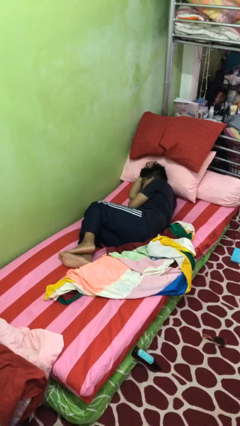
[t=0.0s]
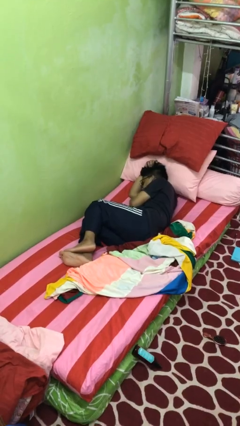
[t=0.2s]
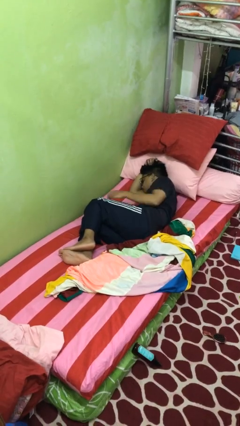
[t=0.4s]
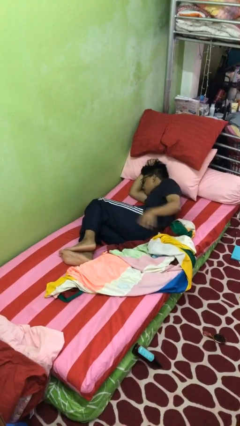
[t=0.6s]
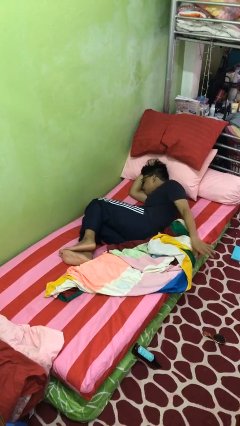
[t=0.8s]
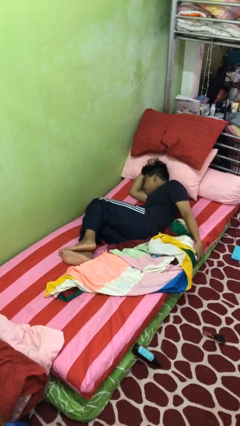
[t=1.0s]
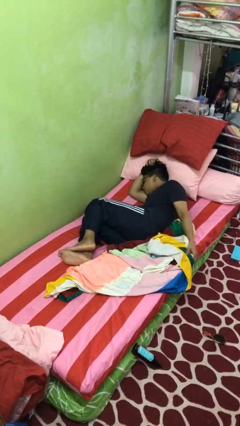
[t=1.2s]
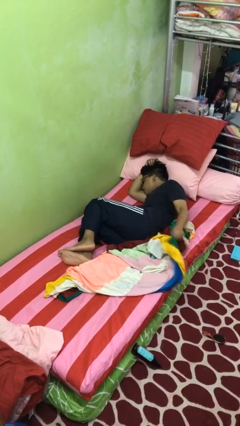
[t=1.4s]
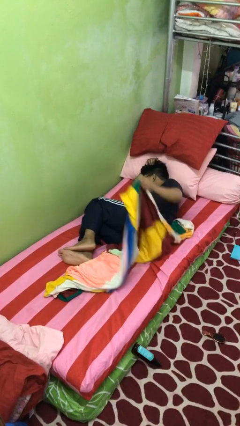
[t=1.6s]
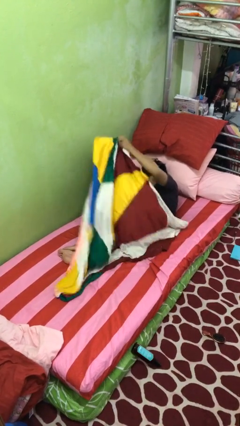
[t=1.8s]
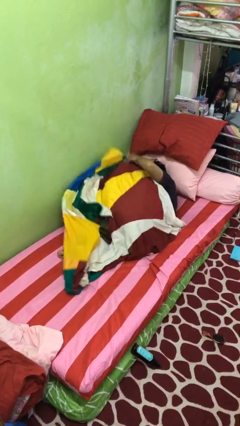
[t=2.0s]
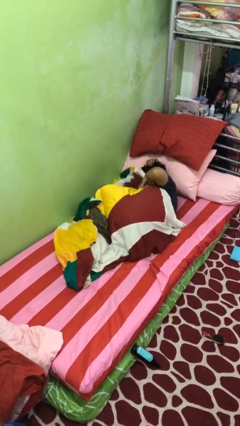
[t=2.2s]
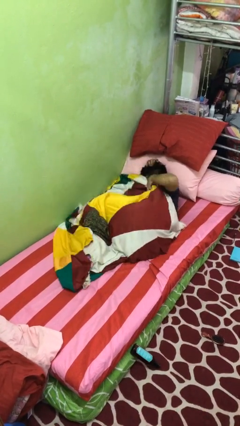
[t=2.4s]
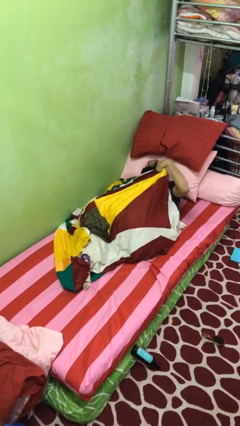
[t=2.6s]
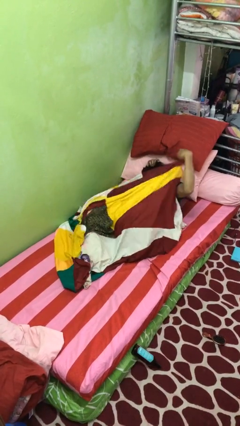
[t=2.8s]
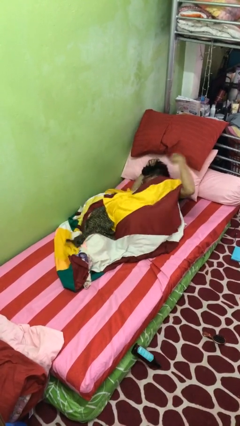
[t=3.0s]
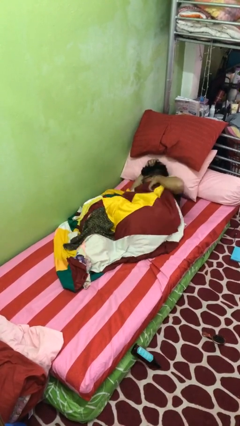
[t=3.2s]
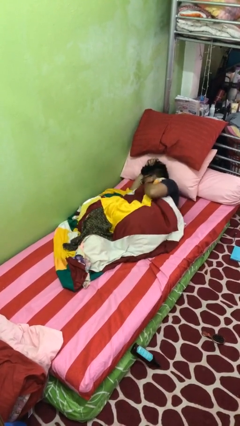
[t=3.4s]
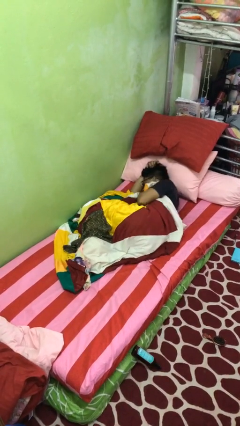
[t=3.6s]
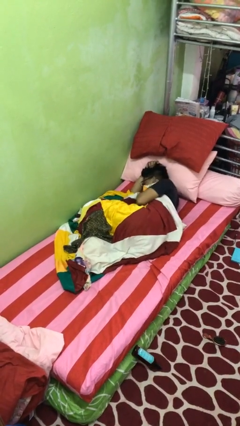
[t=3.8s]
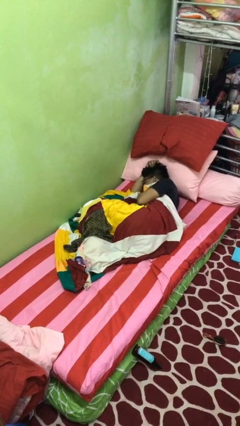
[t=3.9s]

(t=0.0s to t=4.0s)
person covers with blanket

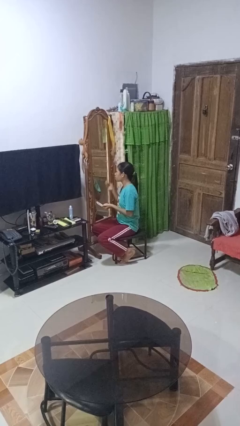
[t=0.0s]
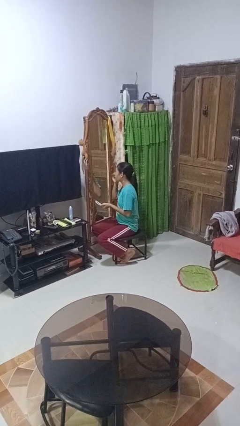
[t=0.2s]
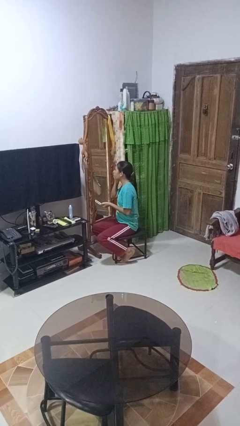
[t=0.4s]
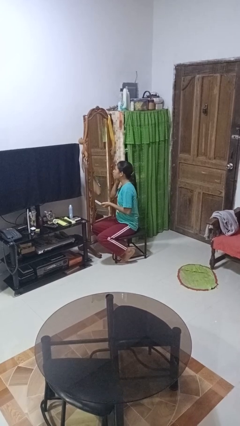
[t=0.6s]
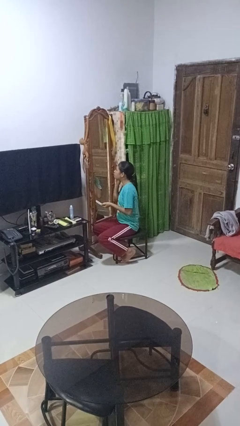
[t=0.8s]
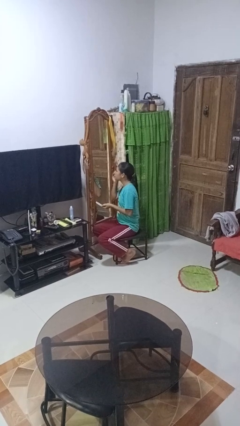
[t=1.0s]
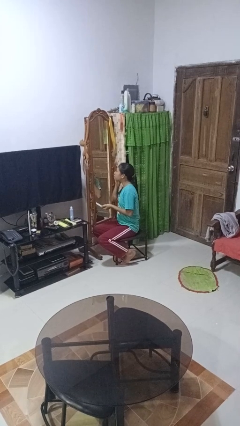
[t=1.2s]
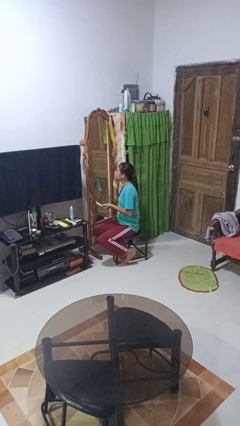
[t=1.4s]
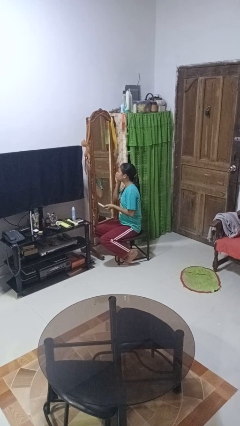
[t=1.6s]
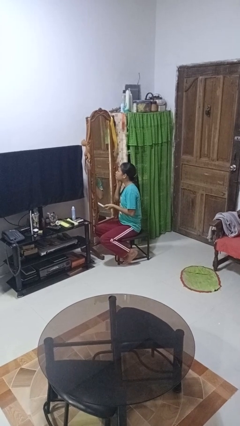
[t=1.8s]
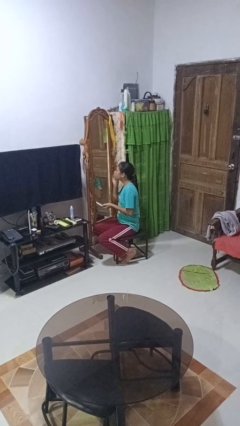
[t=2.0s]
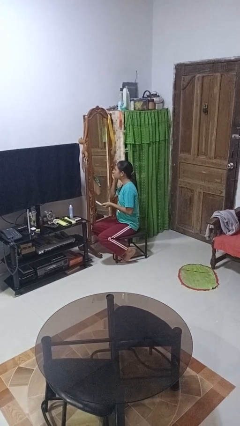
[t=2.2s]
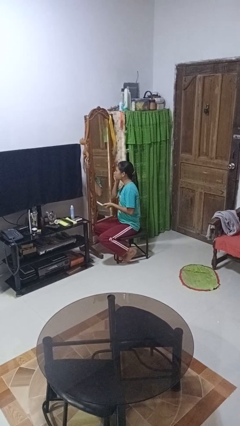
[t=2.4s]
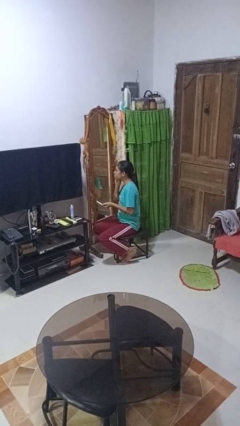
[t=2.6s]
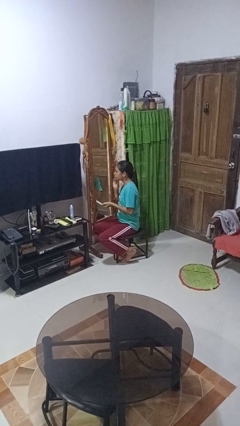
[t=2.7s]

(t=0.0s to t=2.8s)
person applies foundation makeup

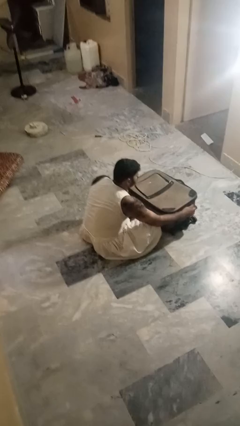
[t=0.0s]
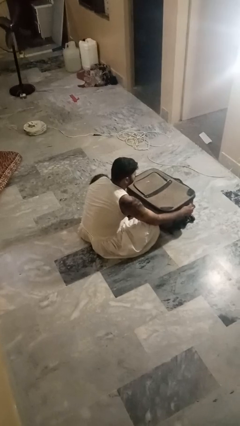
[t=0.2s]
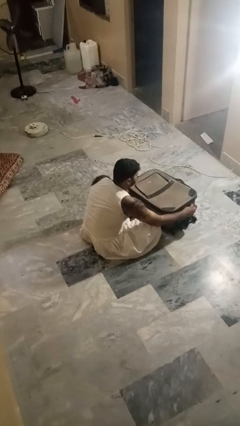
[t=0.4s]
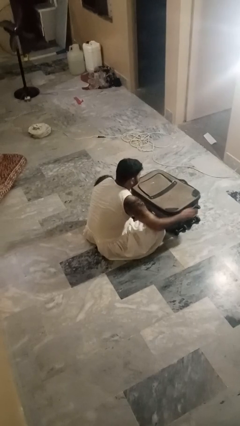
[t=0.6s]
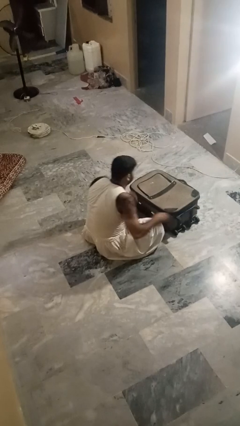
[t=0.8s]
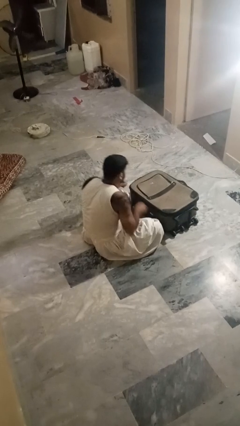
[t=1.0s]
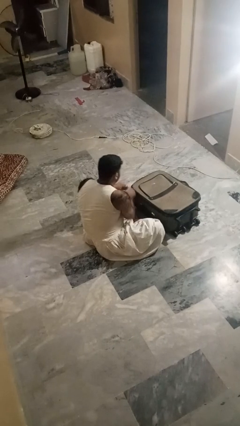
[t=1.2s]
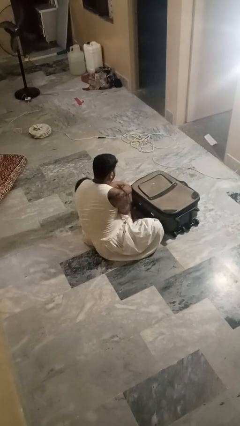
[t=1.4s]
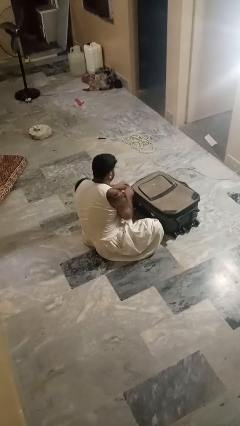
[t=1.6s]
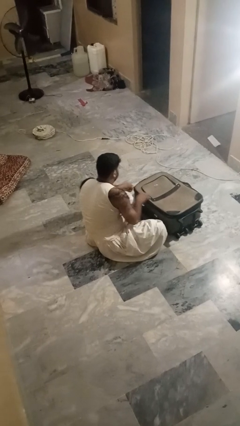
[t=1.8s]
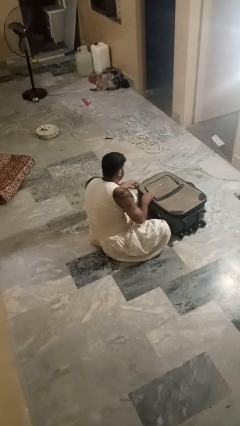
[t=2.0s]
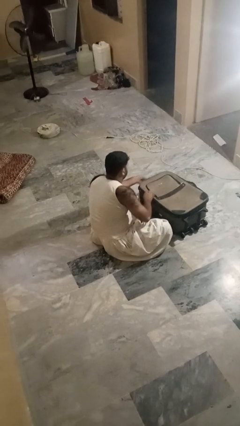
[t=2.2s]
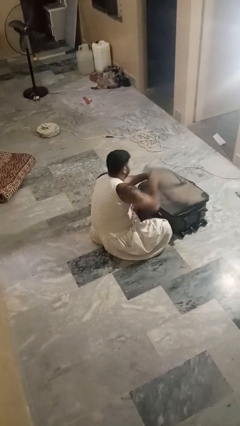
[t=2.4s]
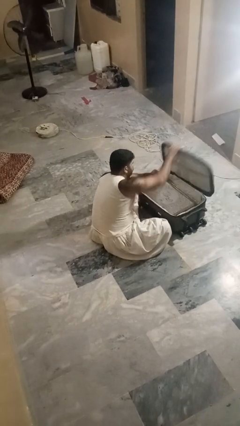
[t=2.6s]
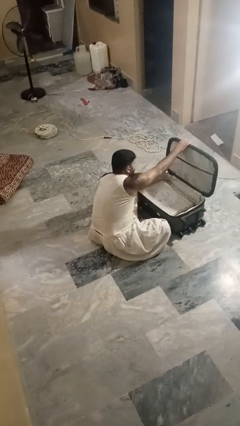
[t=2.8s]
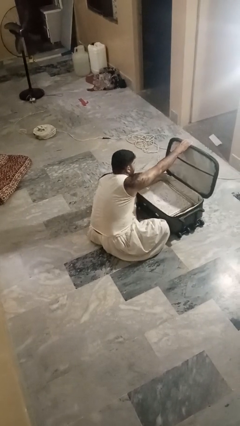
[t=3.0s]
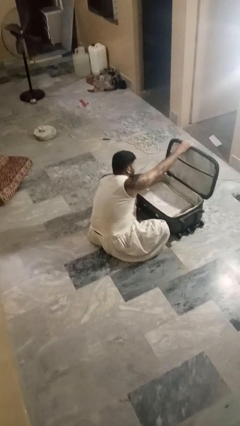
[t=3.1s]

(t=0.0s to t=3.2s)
person opens suitcase

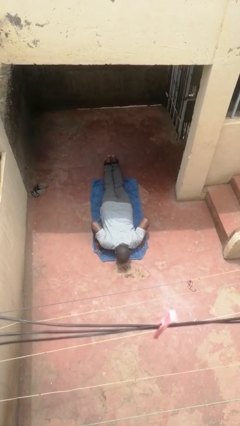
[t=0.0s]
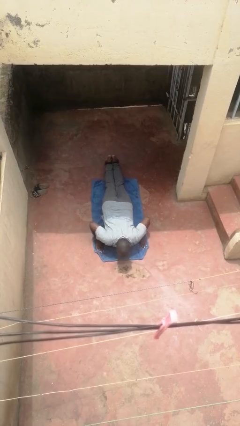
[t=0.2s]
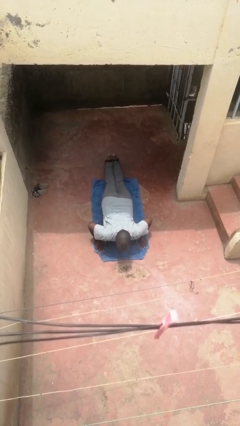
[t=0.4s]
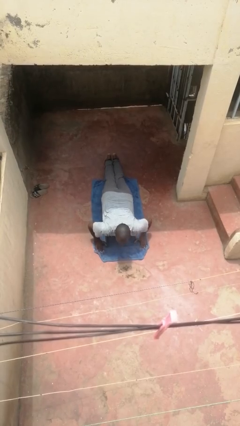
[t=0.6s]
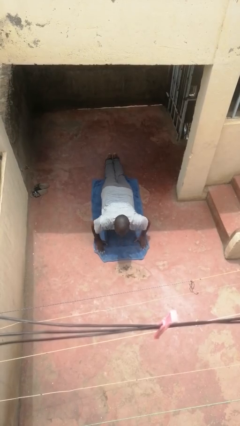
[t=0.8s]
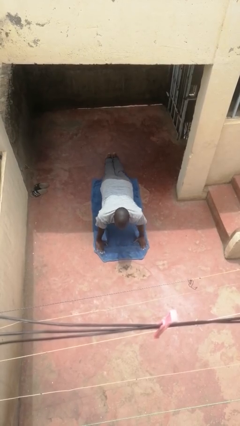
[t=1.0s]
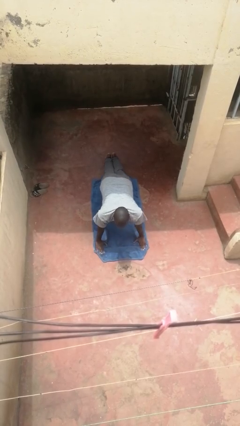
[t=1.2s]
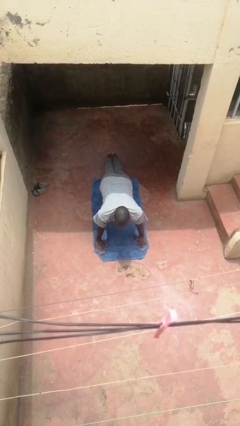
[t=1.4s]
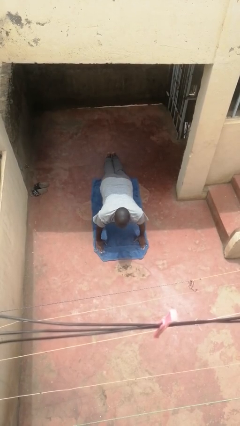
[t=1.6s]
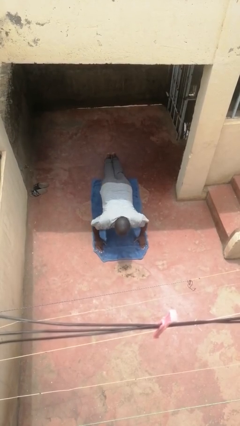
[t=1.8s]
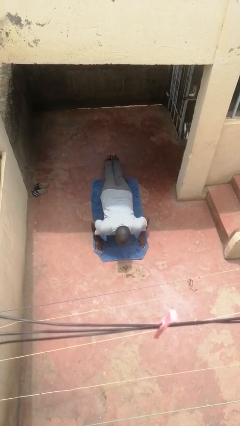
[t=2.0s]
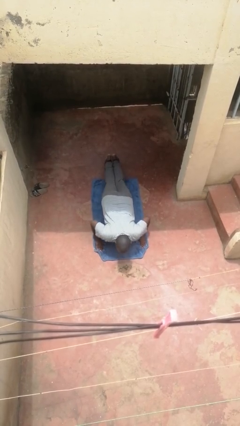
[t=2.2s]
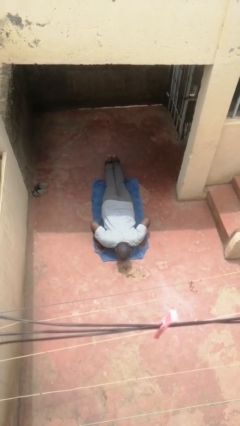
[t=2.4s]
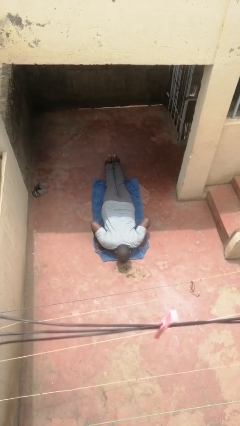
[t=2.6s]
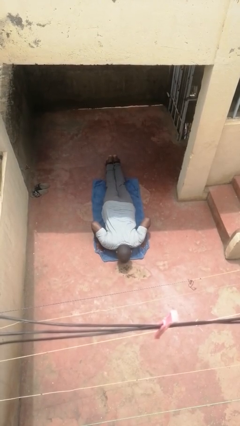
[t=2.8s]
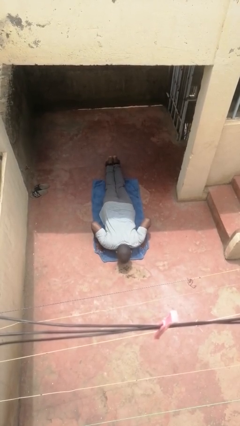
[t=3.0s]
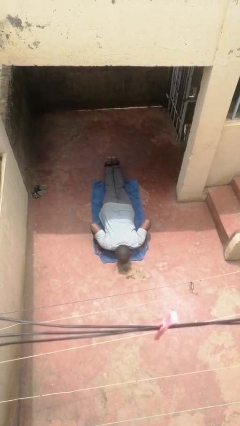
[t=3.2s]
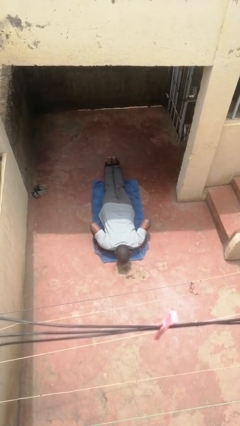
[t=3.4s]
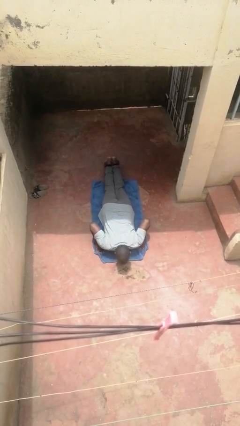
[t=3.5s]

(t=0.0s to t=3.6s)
person exercises with pushup

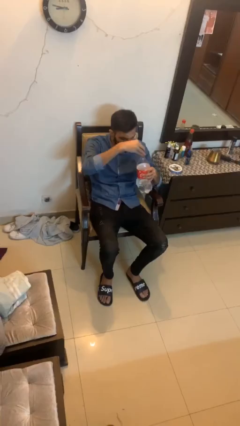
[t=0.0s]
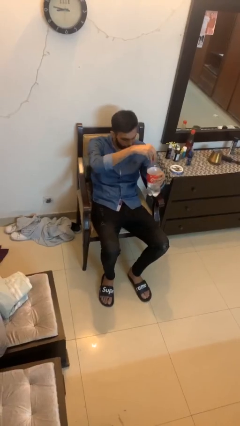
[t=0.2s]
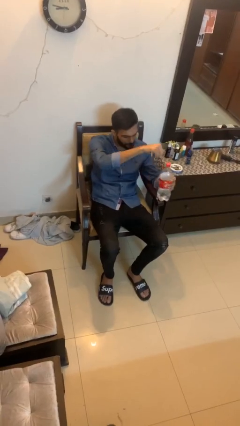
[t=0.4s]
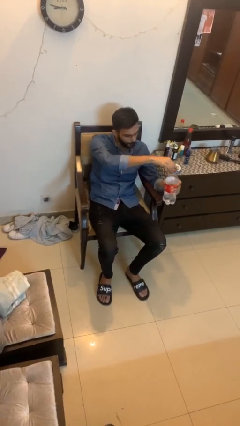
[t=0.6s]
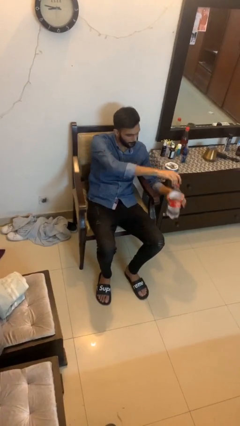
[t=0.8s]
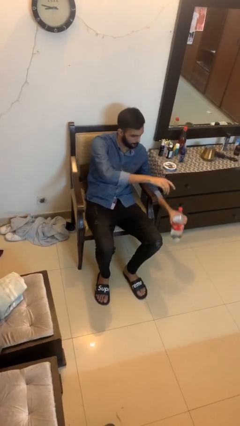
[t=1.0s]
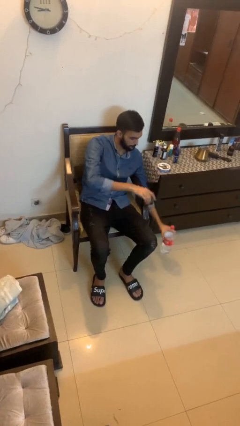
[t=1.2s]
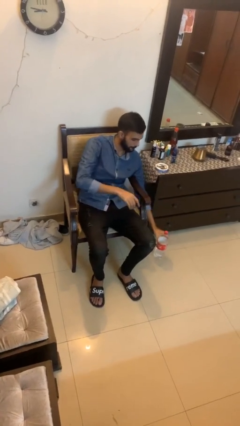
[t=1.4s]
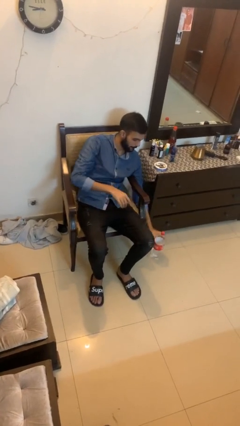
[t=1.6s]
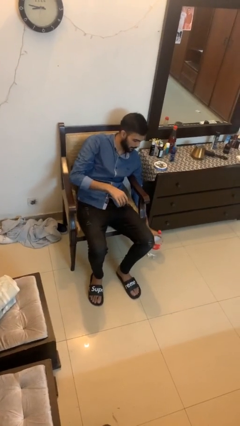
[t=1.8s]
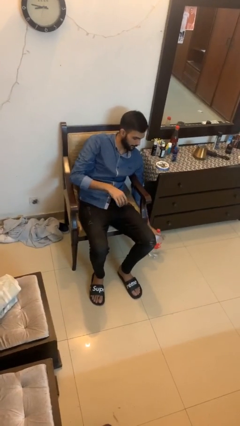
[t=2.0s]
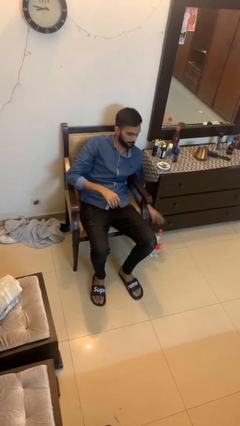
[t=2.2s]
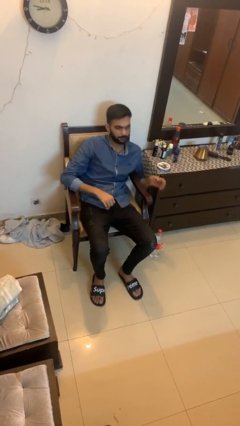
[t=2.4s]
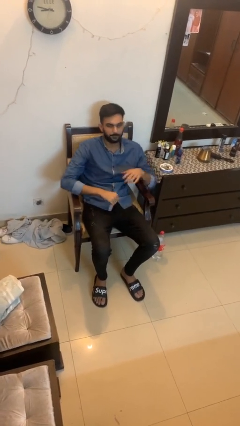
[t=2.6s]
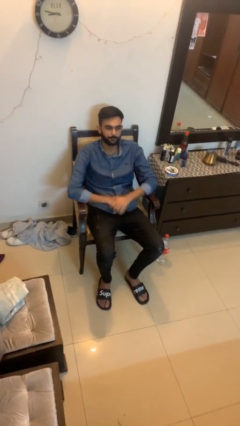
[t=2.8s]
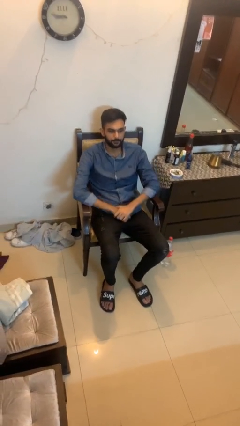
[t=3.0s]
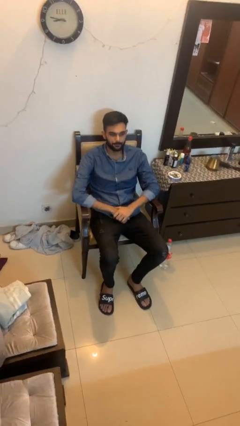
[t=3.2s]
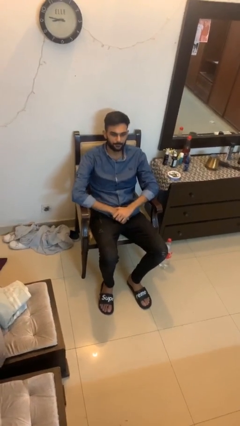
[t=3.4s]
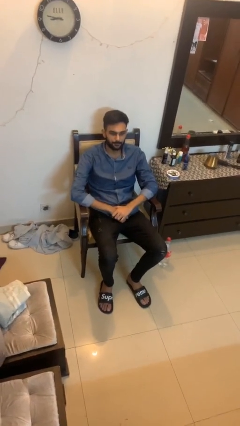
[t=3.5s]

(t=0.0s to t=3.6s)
person puts down object on floor
